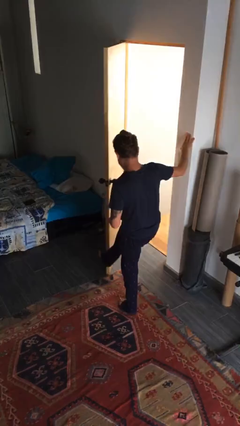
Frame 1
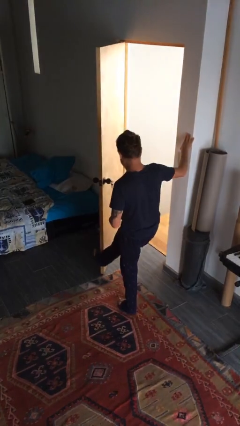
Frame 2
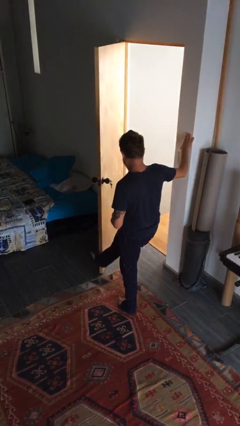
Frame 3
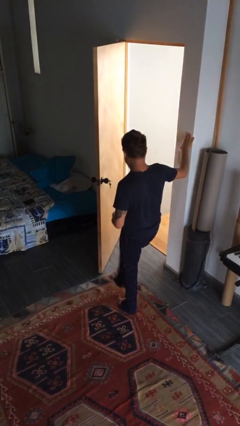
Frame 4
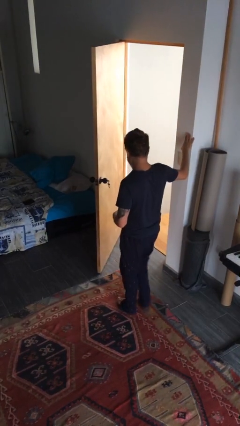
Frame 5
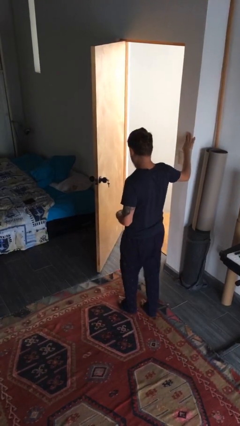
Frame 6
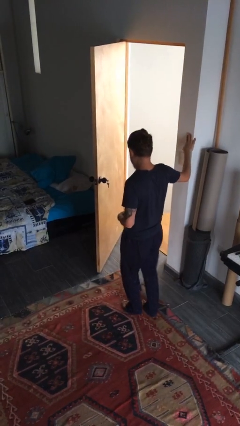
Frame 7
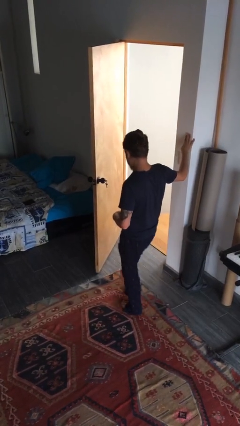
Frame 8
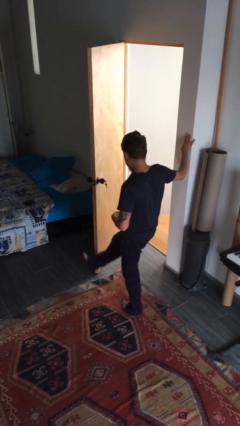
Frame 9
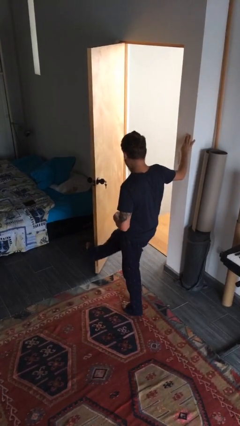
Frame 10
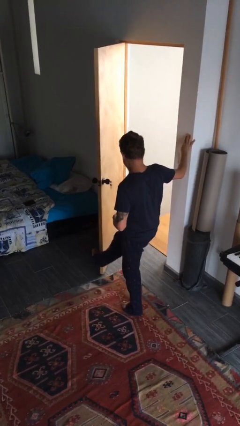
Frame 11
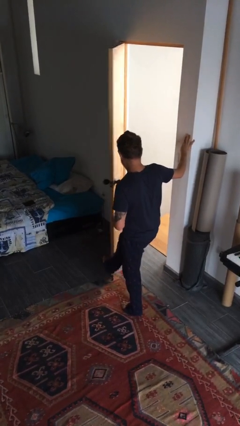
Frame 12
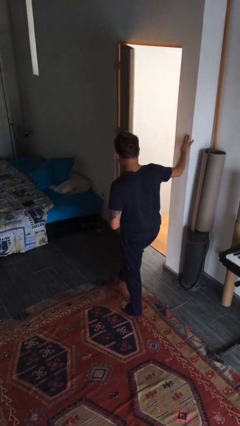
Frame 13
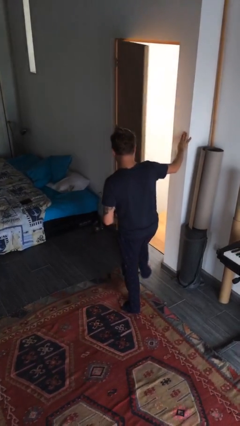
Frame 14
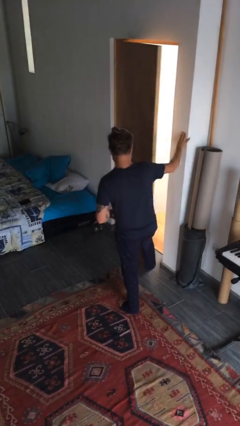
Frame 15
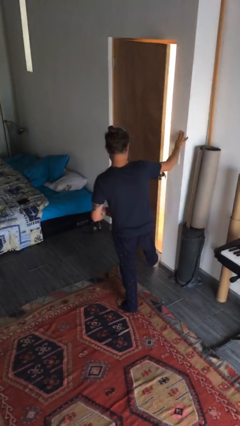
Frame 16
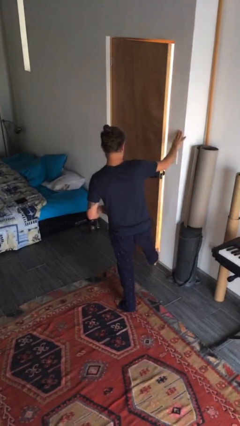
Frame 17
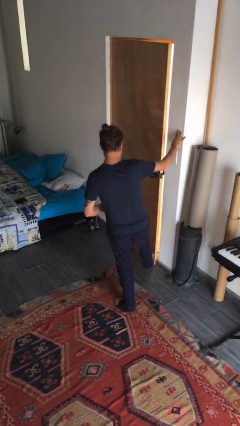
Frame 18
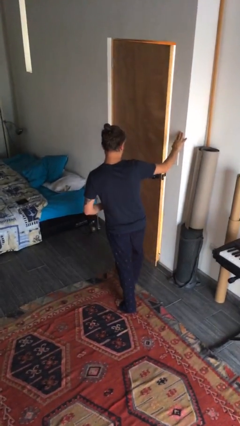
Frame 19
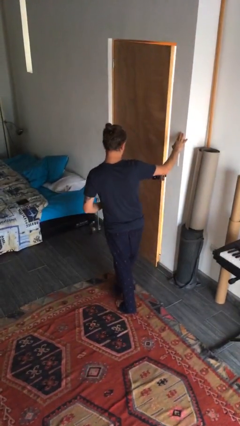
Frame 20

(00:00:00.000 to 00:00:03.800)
person closes door with foot

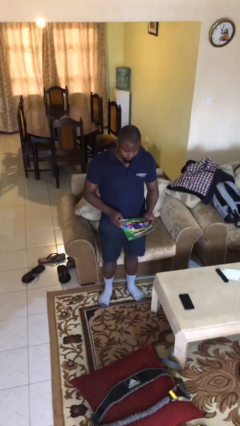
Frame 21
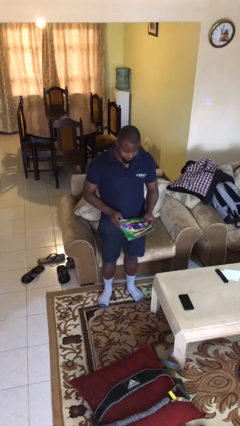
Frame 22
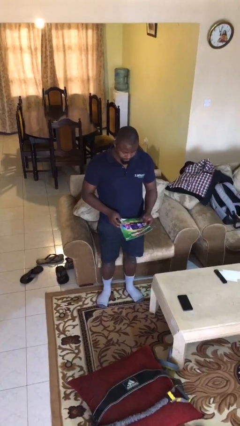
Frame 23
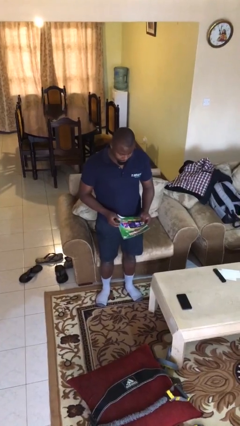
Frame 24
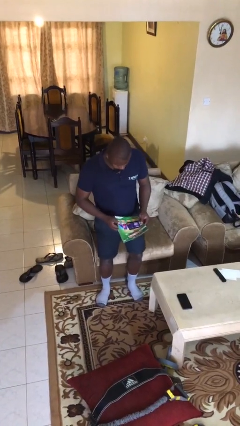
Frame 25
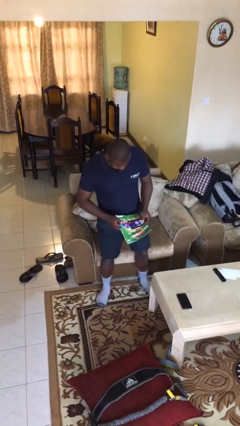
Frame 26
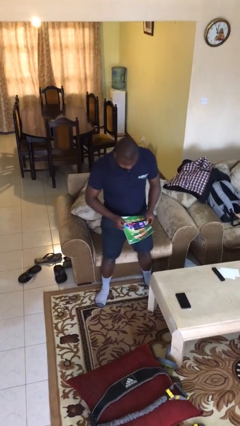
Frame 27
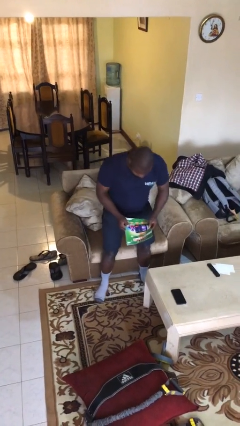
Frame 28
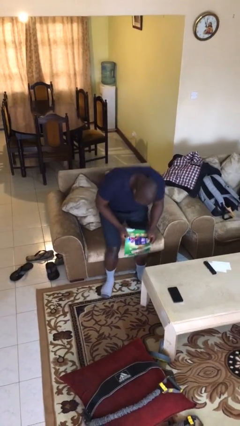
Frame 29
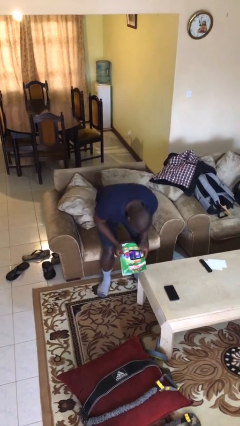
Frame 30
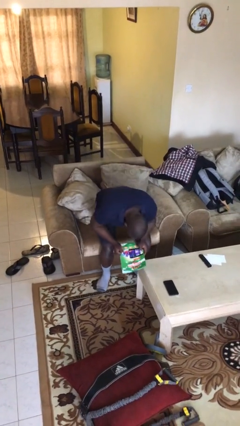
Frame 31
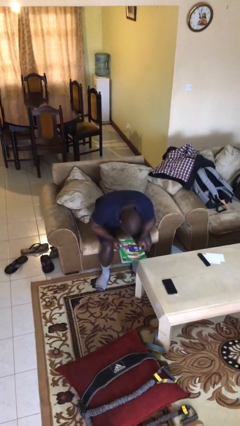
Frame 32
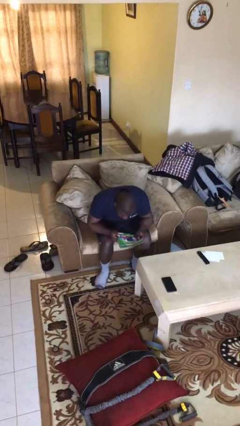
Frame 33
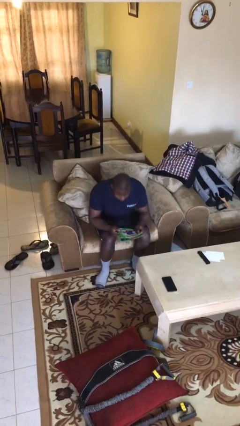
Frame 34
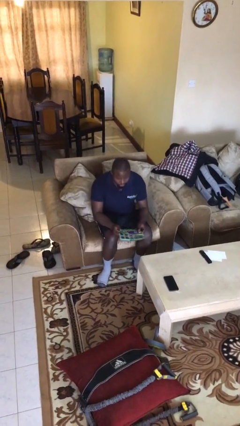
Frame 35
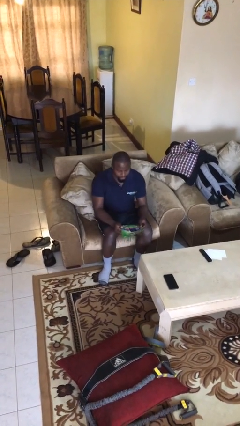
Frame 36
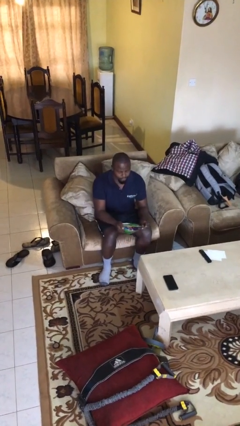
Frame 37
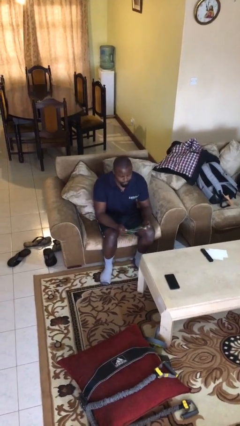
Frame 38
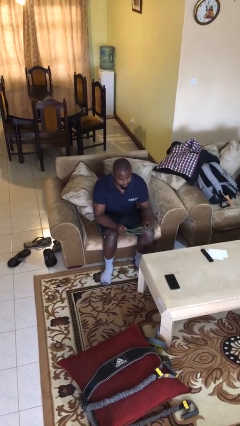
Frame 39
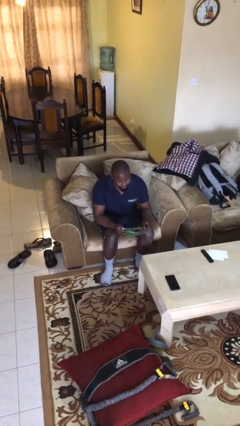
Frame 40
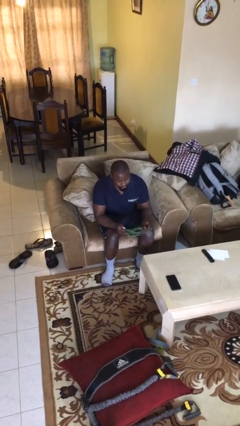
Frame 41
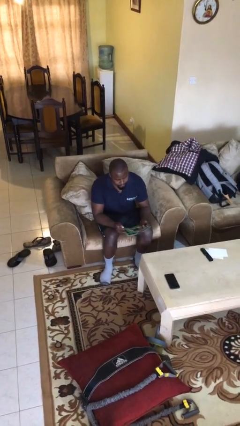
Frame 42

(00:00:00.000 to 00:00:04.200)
person sits down

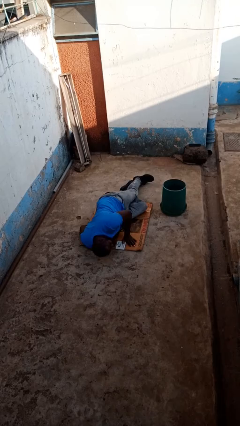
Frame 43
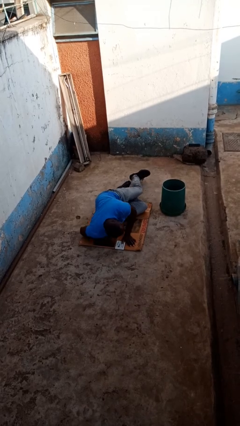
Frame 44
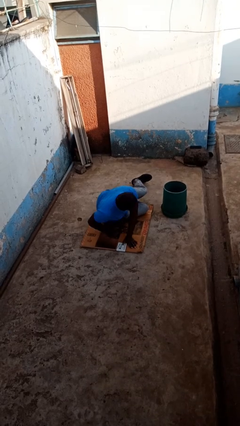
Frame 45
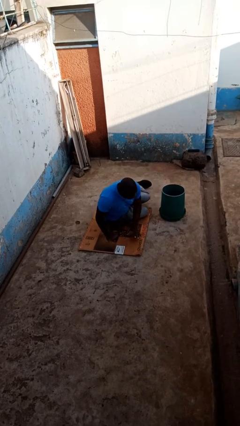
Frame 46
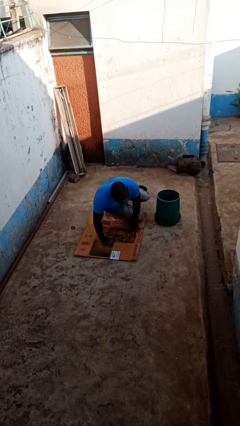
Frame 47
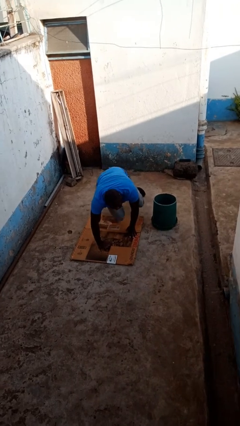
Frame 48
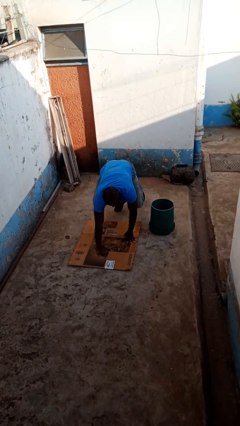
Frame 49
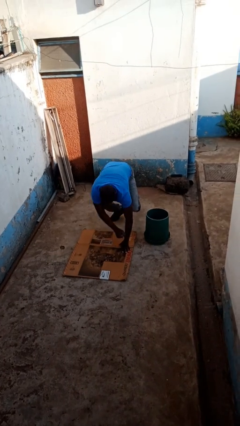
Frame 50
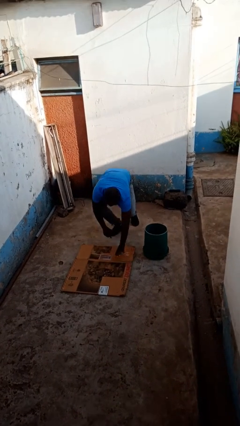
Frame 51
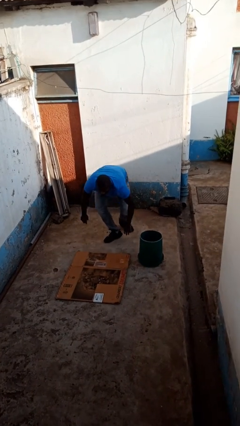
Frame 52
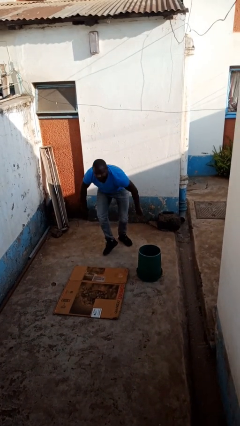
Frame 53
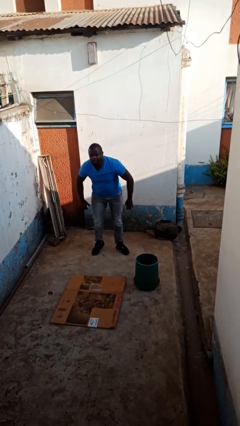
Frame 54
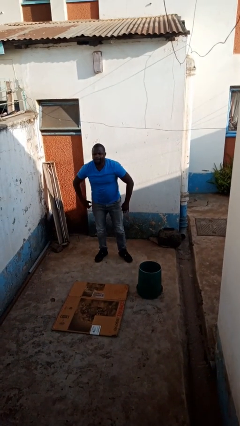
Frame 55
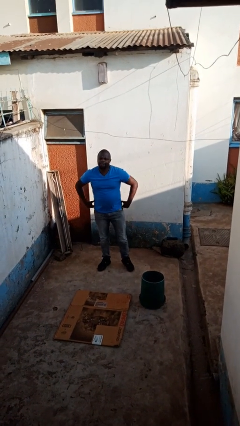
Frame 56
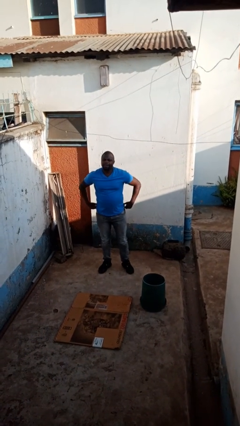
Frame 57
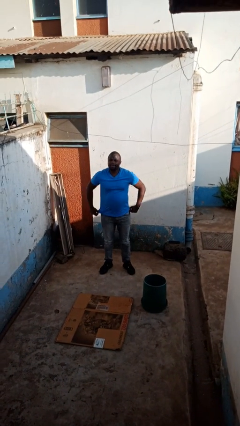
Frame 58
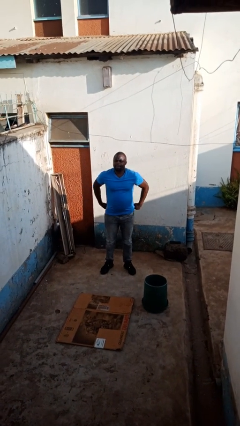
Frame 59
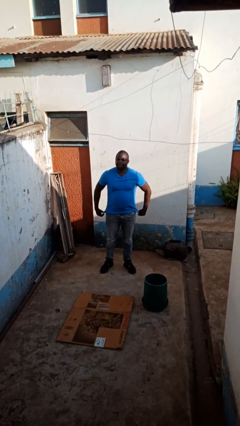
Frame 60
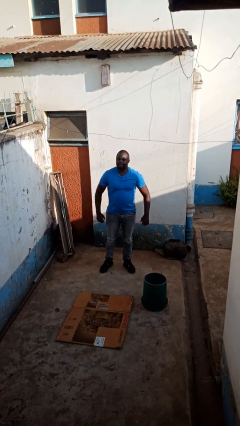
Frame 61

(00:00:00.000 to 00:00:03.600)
person stands up from floor

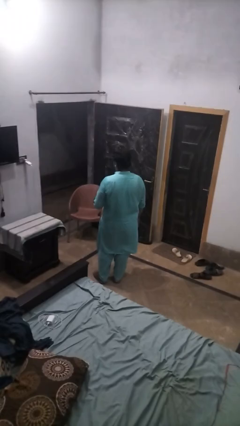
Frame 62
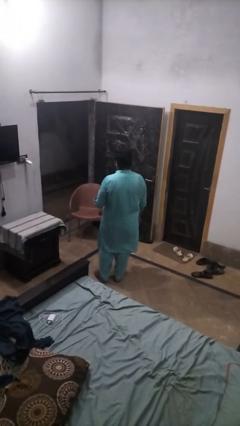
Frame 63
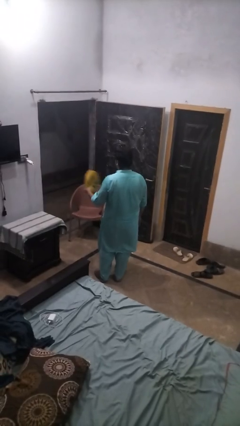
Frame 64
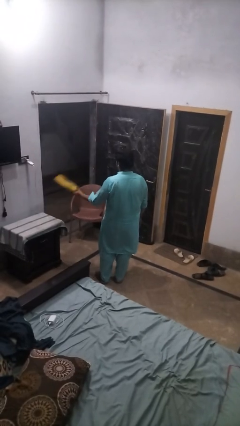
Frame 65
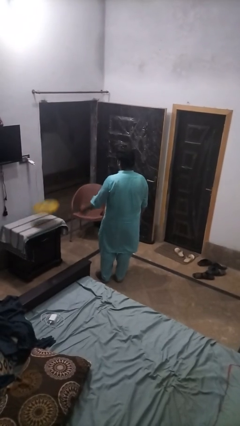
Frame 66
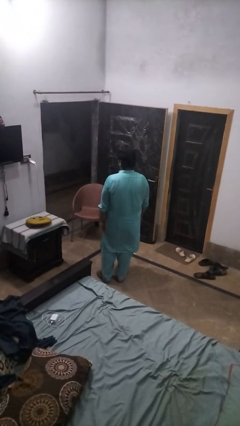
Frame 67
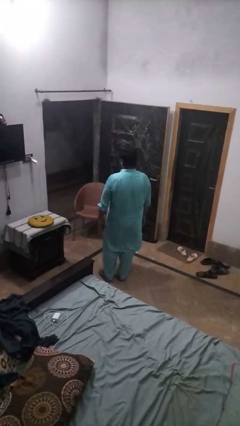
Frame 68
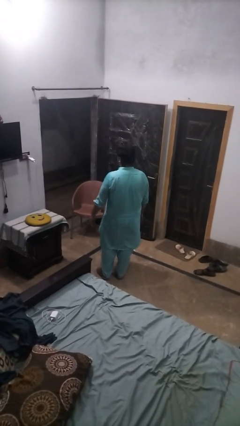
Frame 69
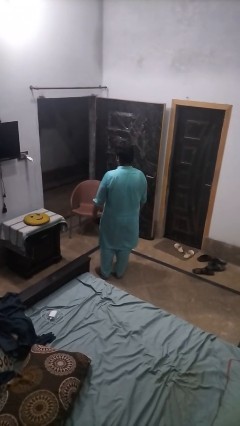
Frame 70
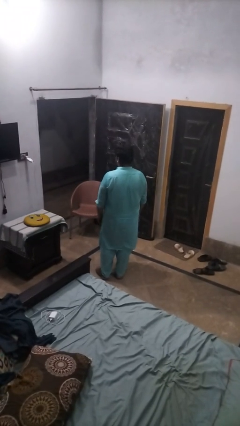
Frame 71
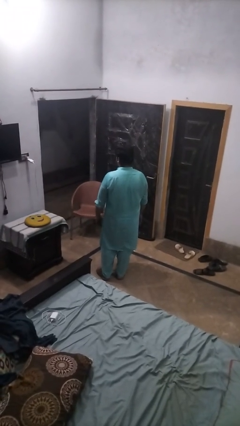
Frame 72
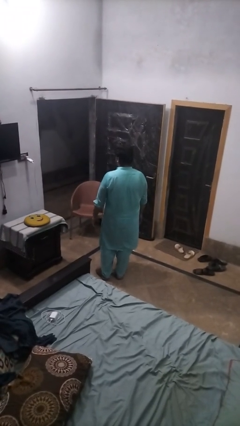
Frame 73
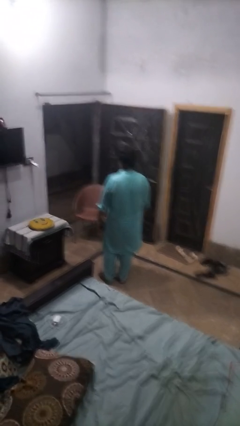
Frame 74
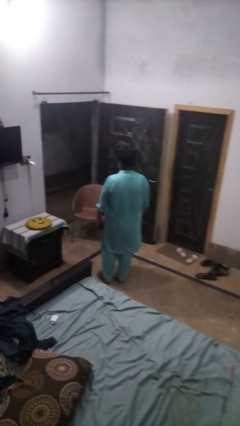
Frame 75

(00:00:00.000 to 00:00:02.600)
person throws object on table

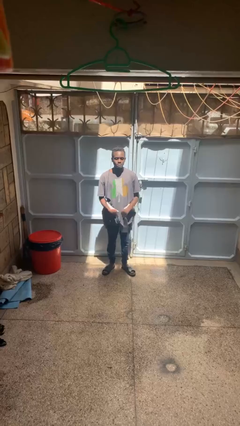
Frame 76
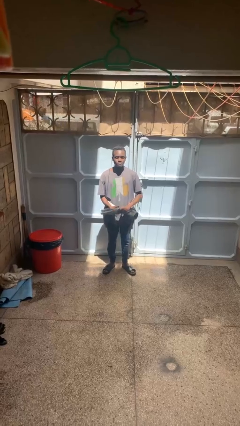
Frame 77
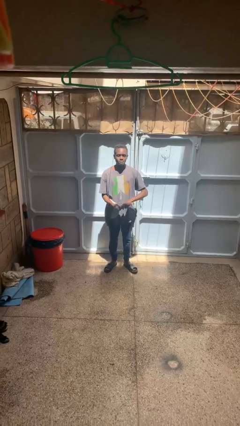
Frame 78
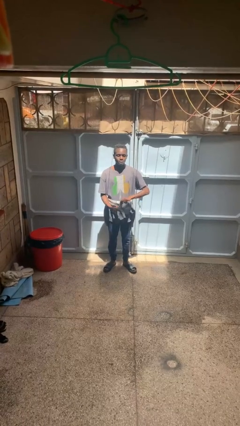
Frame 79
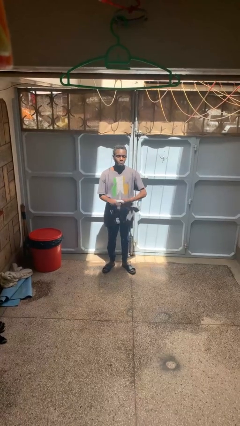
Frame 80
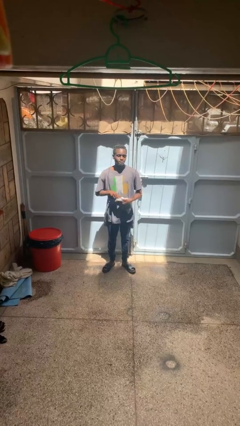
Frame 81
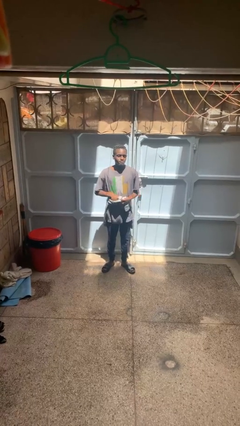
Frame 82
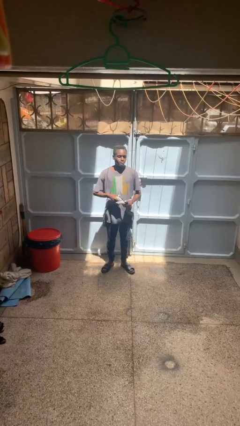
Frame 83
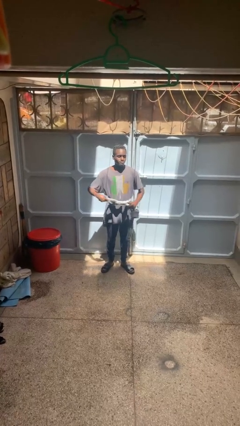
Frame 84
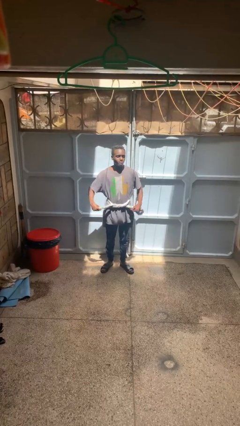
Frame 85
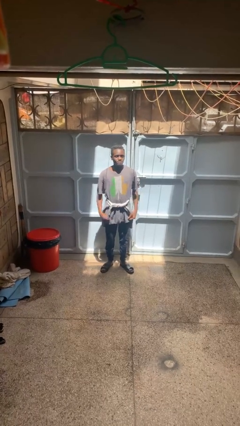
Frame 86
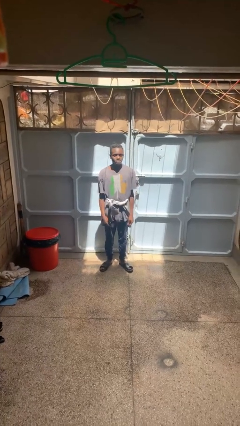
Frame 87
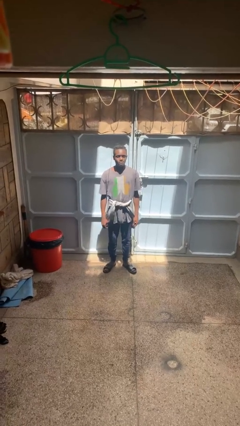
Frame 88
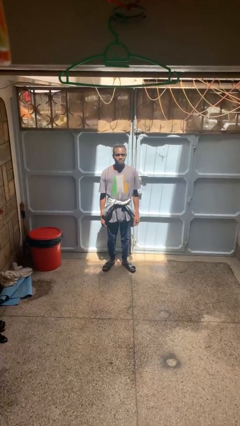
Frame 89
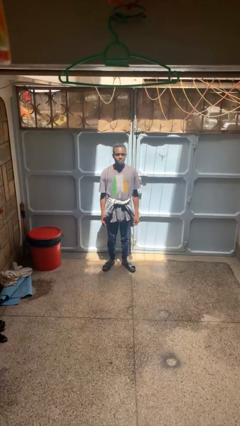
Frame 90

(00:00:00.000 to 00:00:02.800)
person ties jacket around waist

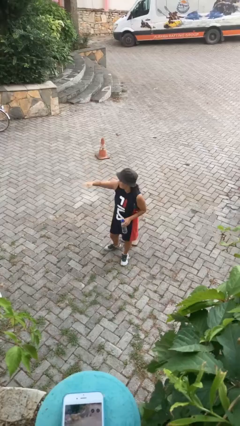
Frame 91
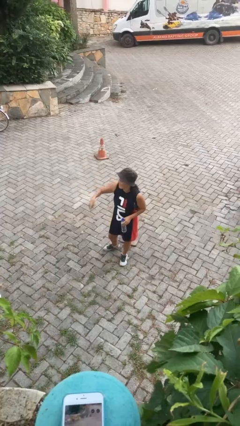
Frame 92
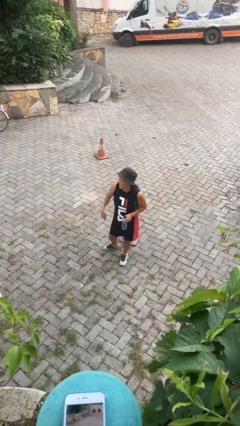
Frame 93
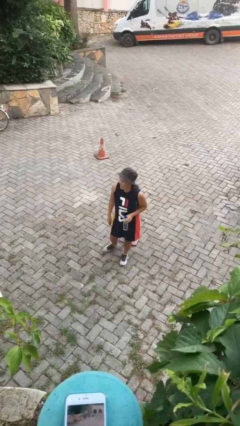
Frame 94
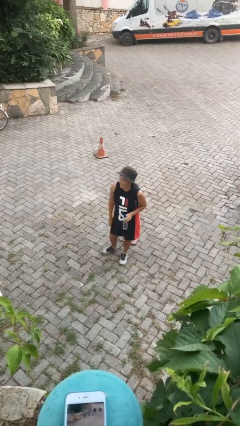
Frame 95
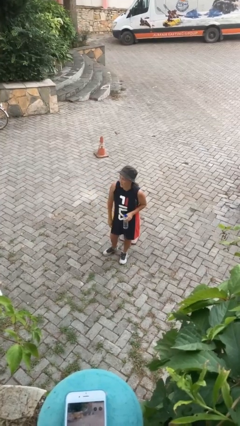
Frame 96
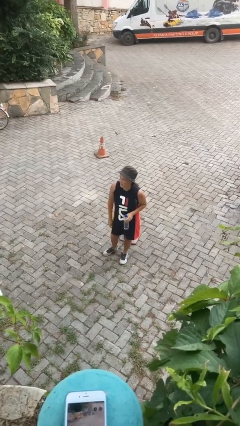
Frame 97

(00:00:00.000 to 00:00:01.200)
person gestures lower hand
